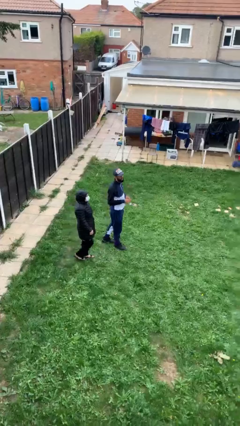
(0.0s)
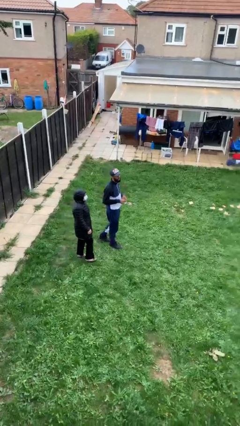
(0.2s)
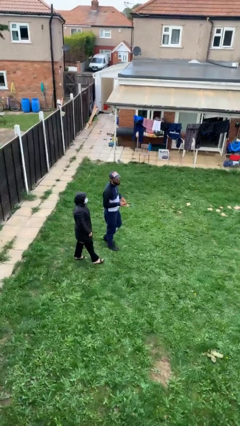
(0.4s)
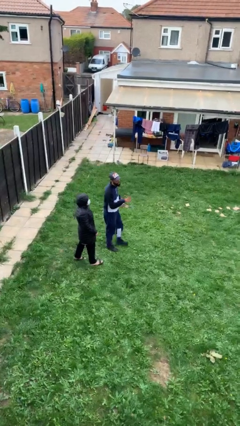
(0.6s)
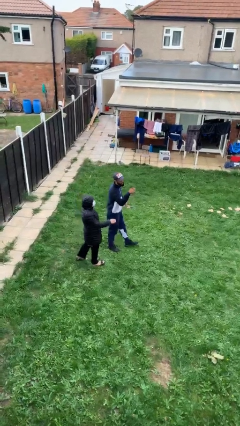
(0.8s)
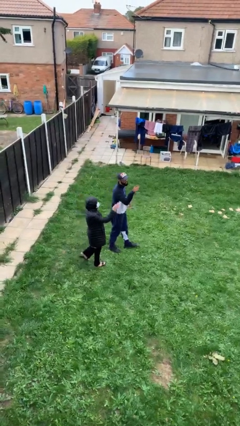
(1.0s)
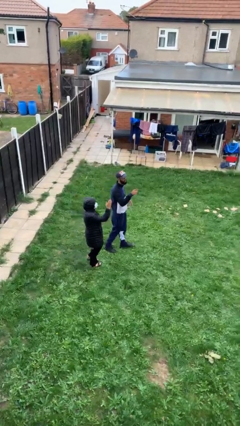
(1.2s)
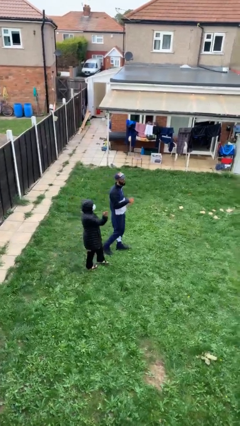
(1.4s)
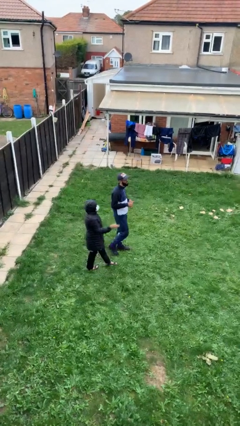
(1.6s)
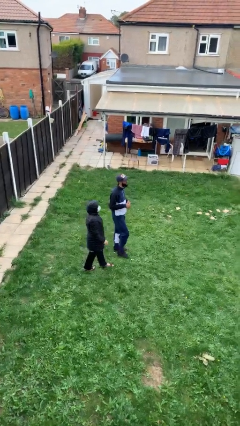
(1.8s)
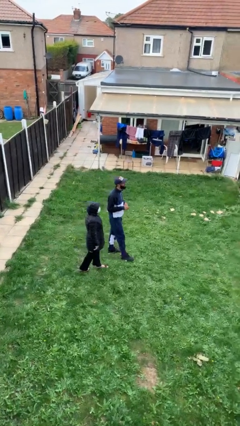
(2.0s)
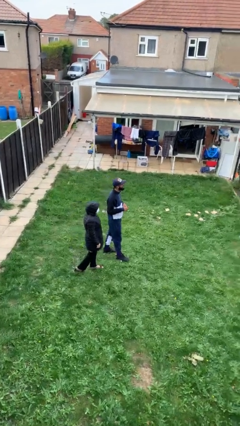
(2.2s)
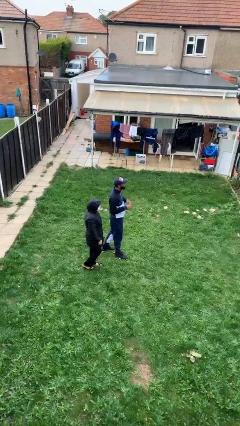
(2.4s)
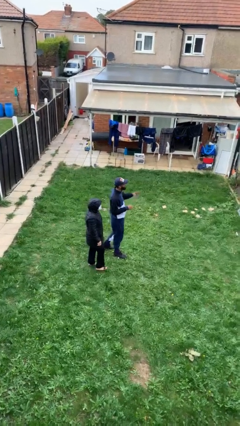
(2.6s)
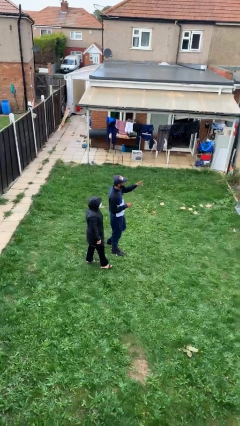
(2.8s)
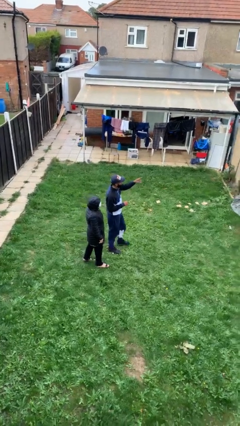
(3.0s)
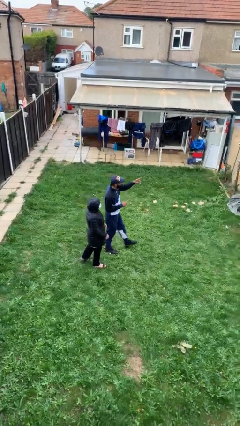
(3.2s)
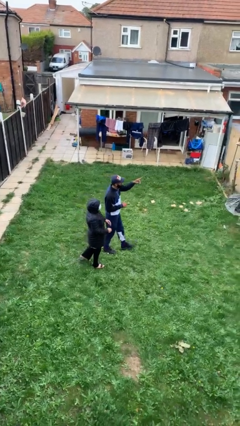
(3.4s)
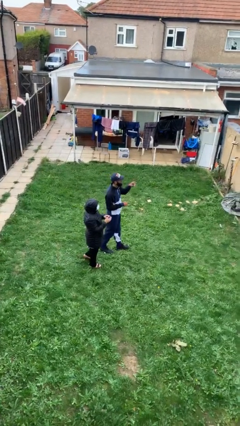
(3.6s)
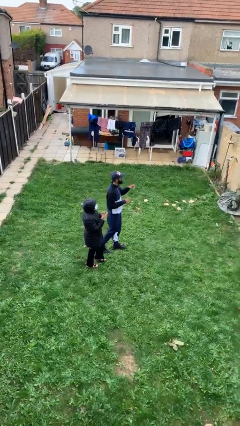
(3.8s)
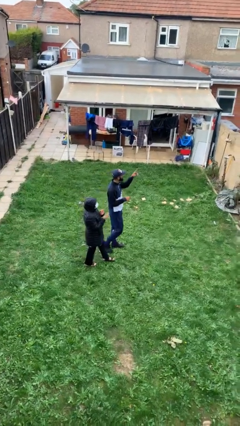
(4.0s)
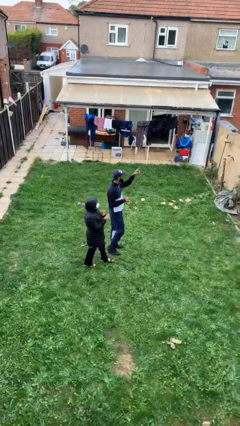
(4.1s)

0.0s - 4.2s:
person talks to person

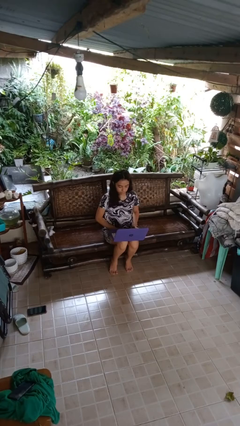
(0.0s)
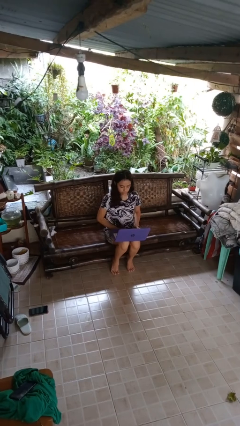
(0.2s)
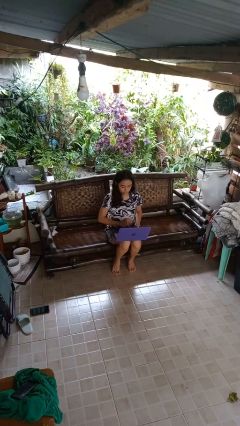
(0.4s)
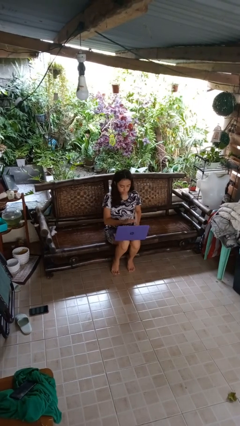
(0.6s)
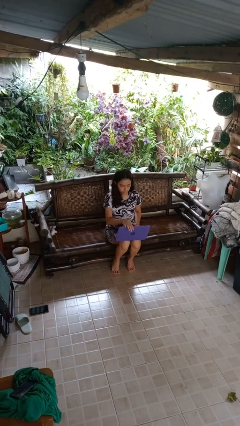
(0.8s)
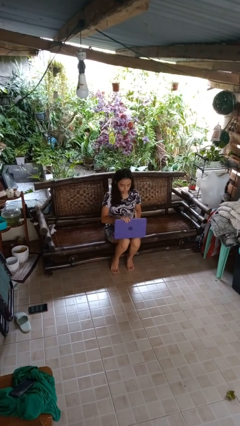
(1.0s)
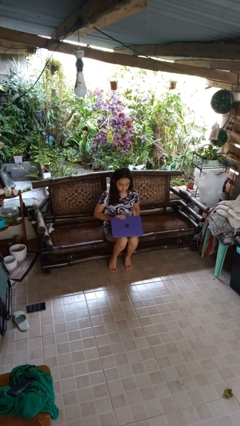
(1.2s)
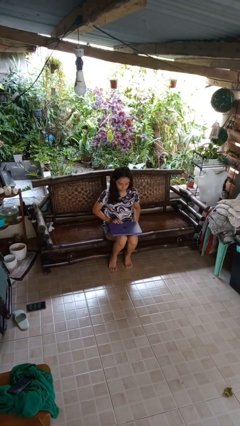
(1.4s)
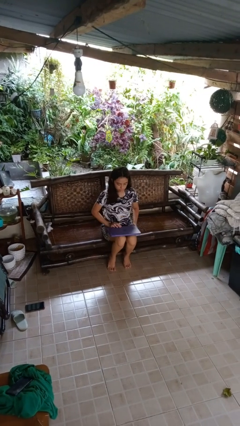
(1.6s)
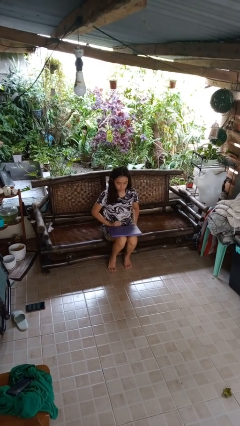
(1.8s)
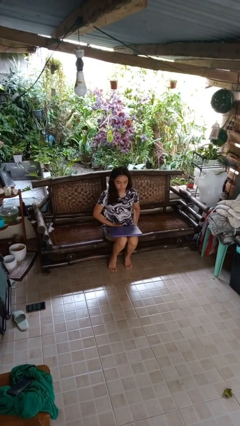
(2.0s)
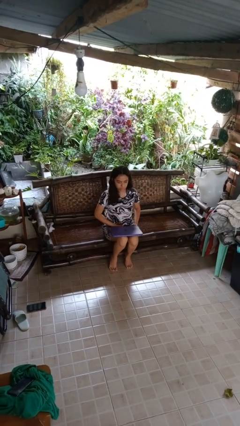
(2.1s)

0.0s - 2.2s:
person closes laptop

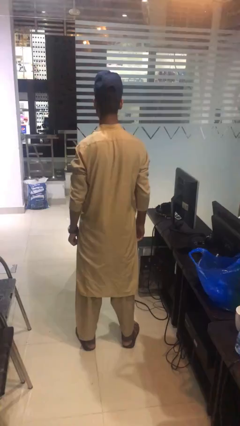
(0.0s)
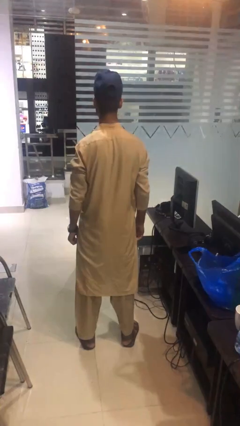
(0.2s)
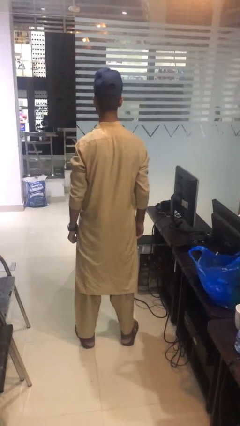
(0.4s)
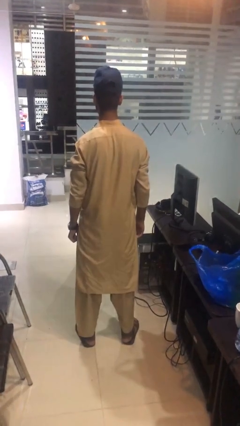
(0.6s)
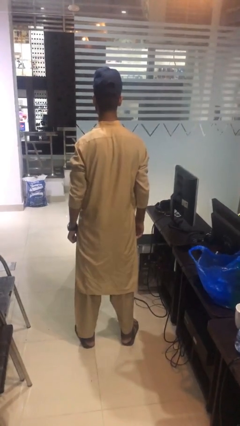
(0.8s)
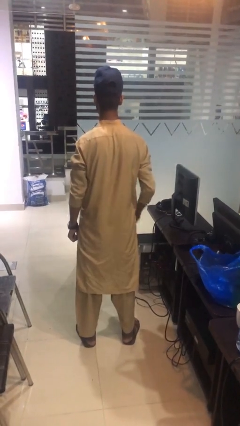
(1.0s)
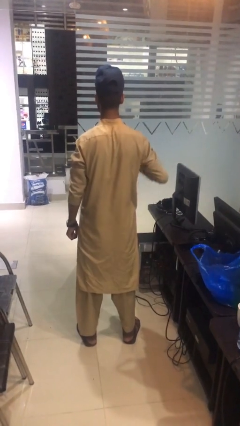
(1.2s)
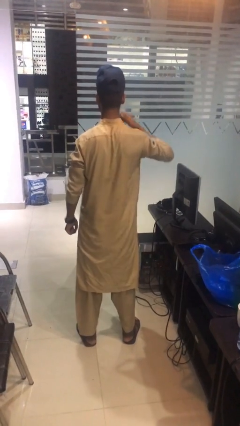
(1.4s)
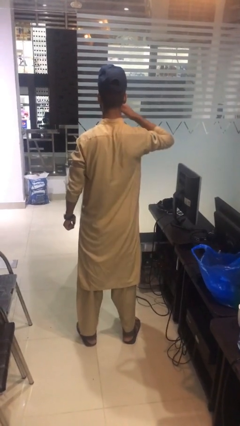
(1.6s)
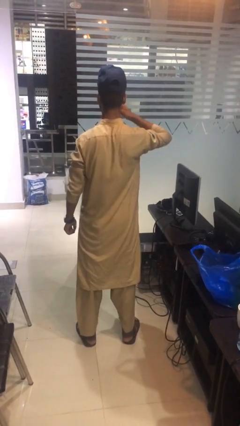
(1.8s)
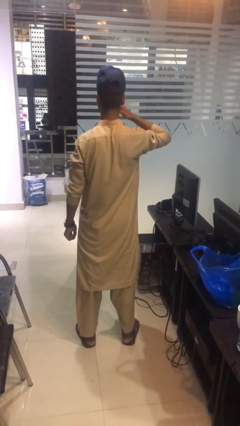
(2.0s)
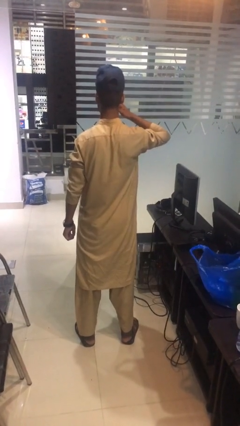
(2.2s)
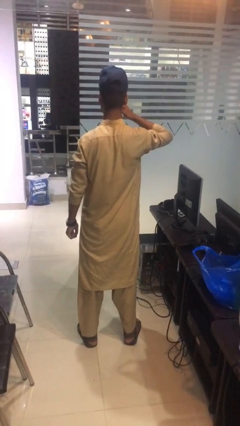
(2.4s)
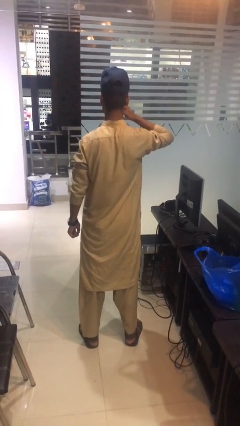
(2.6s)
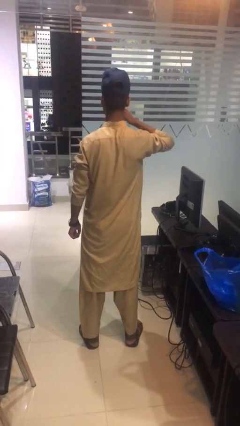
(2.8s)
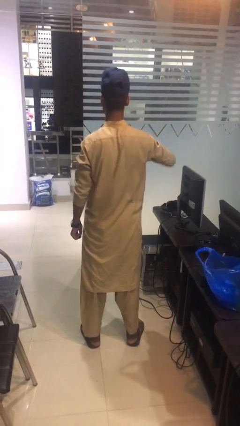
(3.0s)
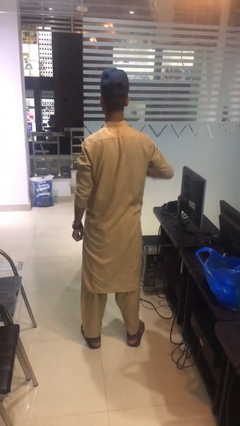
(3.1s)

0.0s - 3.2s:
person scratches face

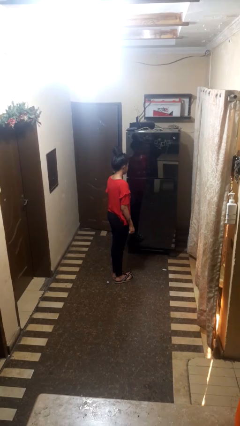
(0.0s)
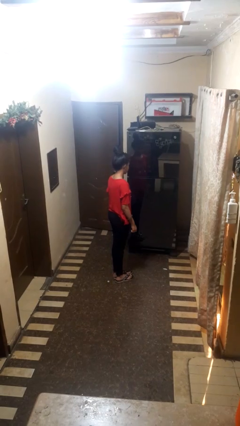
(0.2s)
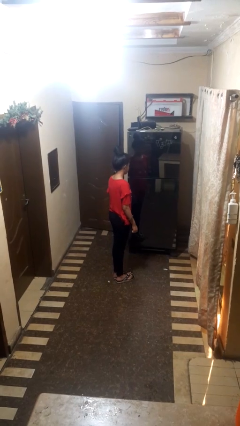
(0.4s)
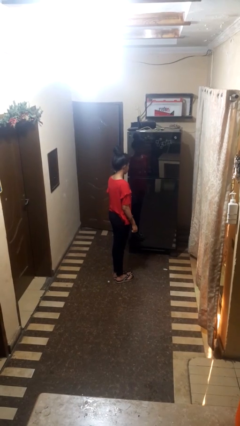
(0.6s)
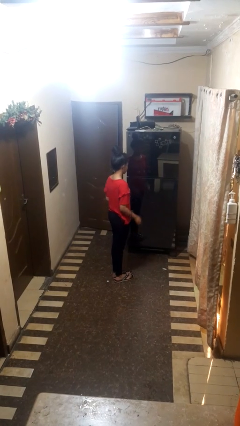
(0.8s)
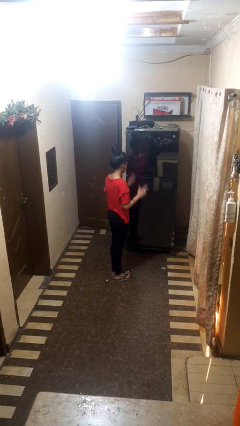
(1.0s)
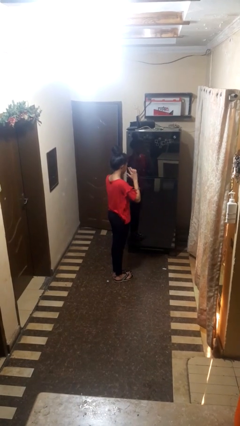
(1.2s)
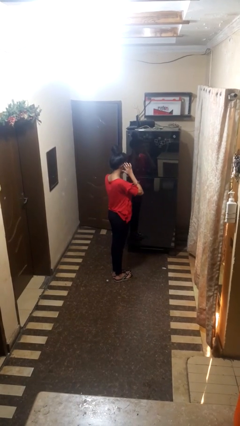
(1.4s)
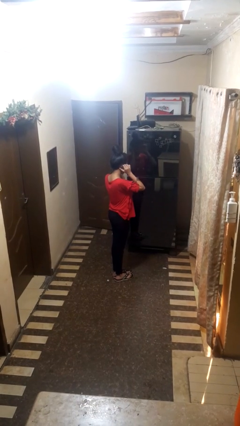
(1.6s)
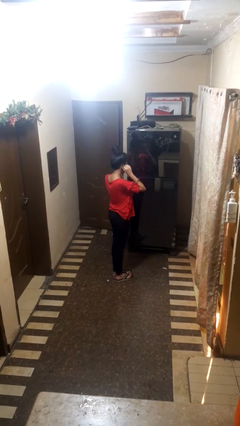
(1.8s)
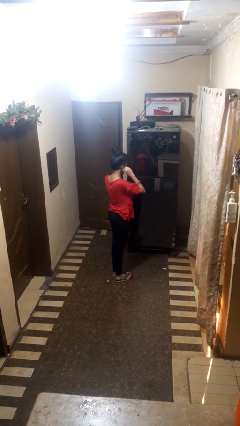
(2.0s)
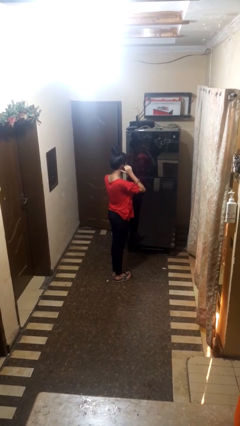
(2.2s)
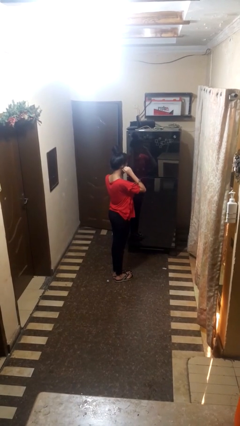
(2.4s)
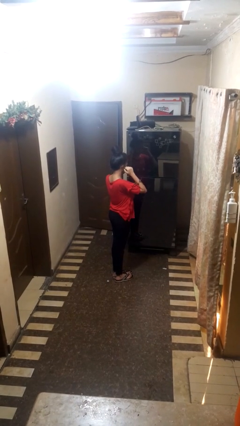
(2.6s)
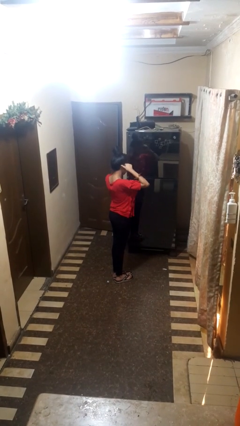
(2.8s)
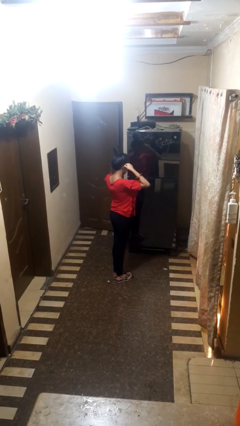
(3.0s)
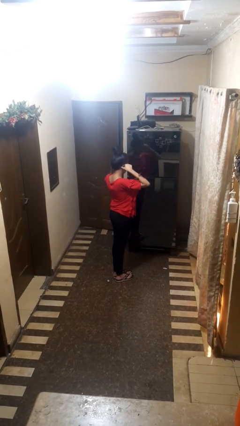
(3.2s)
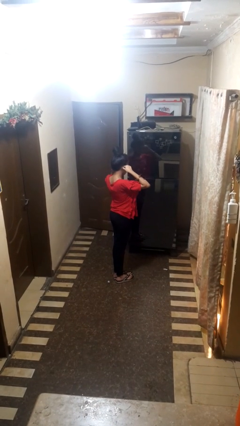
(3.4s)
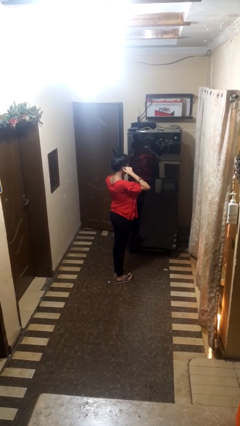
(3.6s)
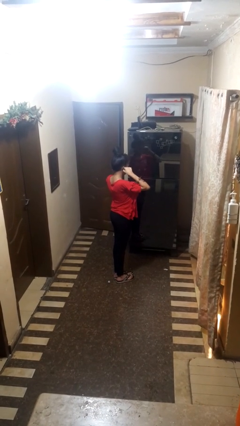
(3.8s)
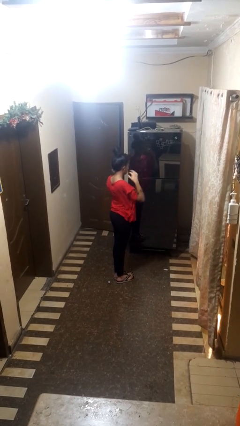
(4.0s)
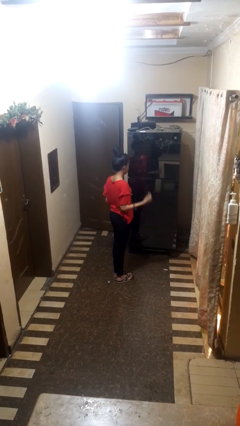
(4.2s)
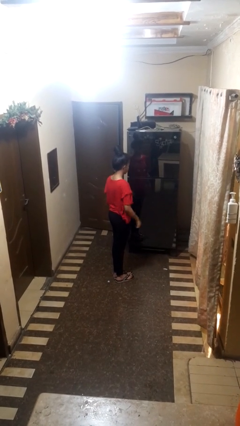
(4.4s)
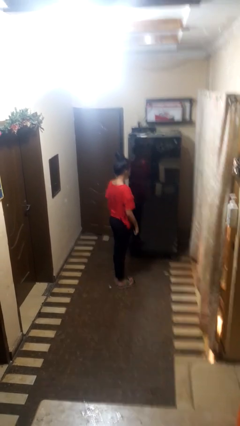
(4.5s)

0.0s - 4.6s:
person touches earlobe

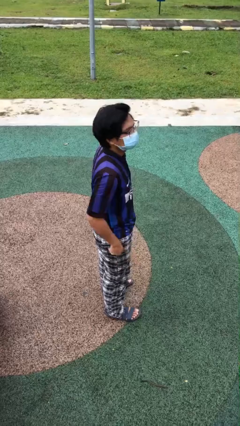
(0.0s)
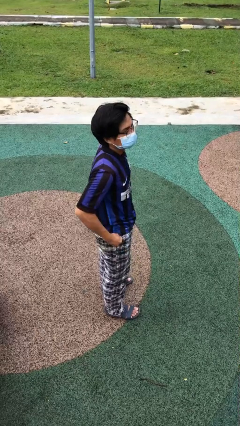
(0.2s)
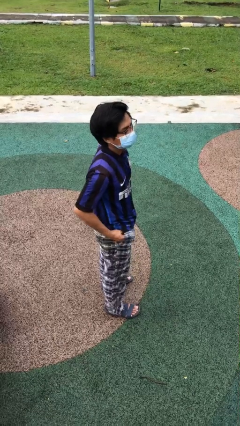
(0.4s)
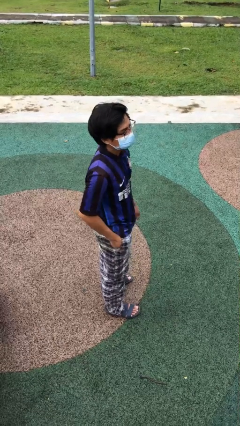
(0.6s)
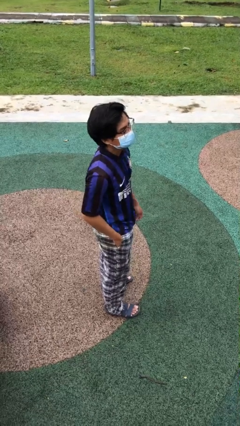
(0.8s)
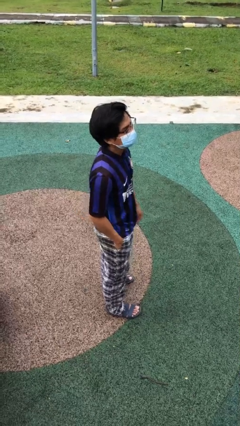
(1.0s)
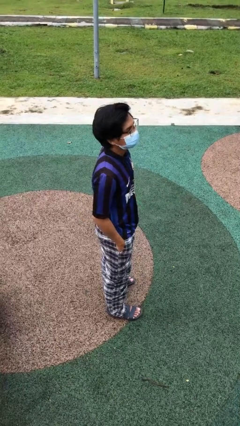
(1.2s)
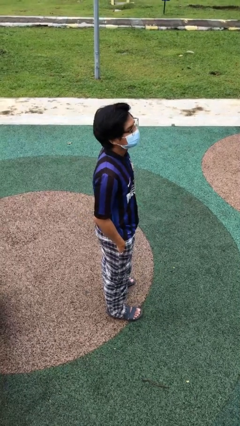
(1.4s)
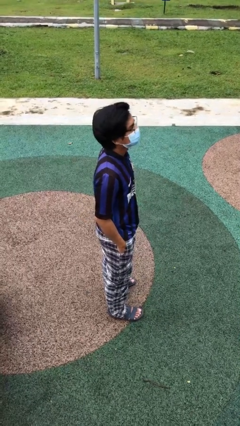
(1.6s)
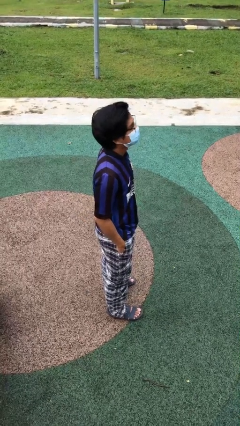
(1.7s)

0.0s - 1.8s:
person puts hands in back pockets

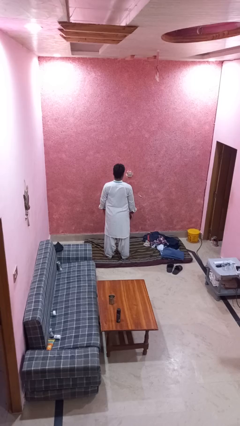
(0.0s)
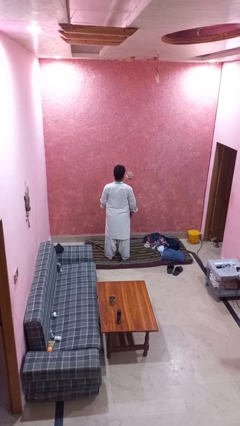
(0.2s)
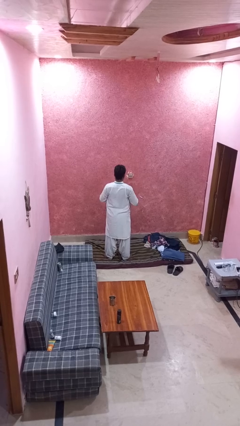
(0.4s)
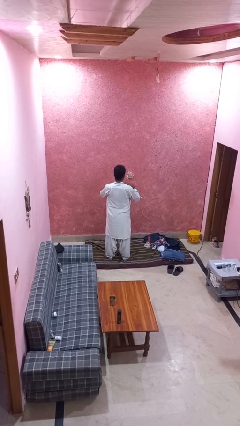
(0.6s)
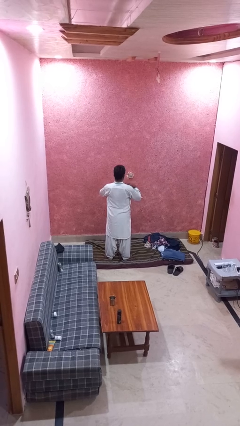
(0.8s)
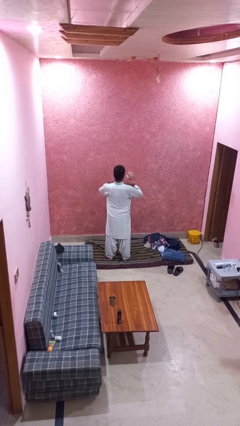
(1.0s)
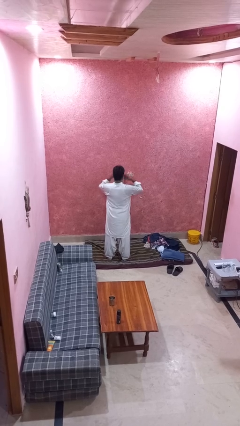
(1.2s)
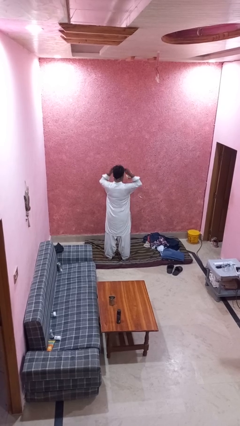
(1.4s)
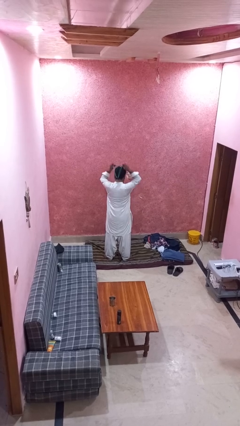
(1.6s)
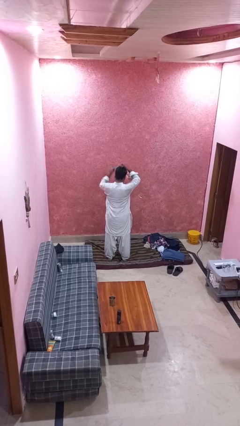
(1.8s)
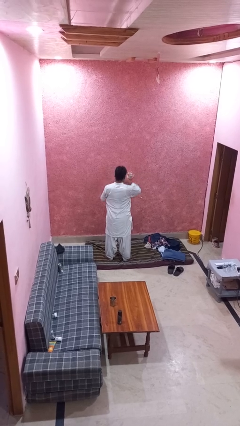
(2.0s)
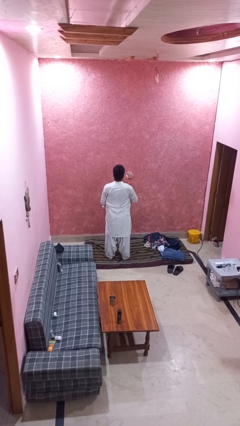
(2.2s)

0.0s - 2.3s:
person takes off necklace
